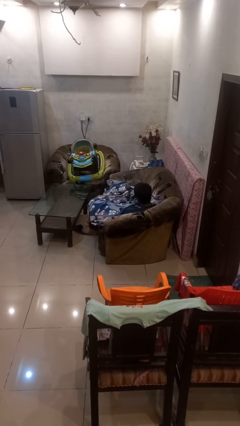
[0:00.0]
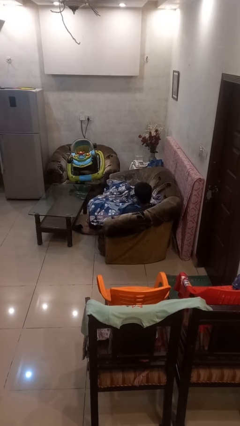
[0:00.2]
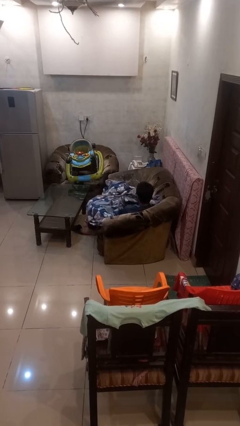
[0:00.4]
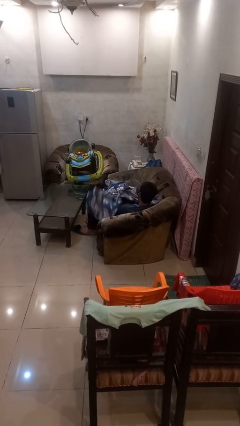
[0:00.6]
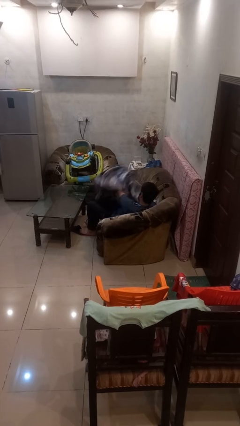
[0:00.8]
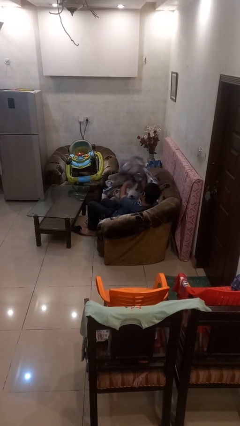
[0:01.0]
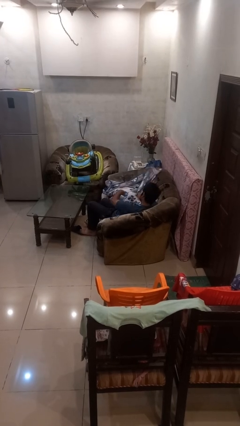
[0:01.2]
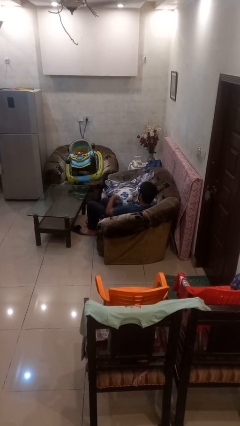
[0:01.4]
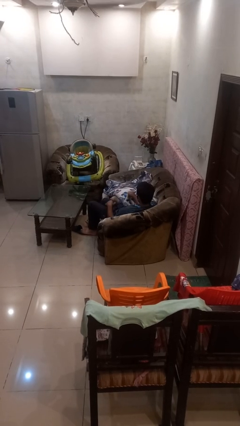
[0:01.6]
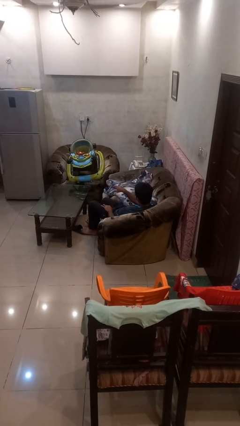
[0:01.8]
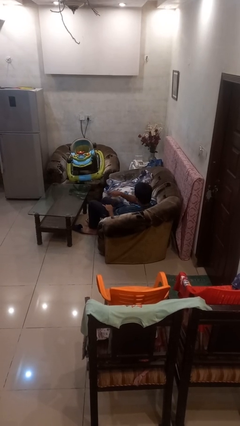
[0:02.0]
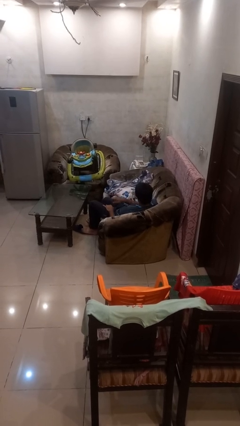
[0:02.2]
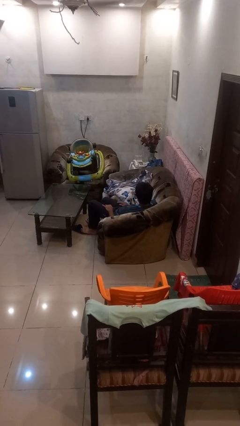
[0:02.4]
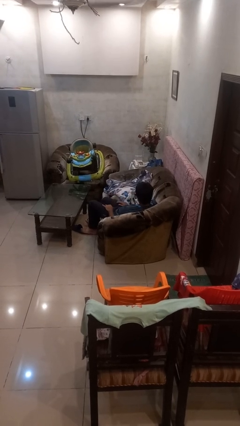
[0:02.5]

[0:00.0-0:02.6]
person uncovers with blanket

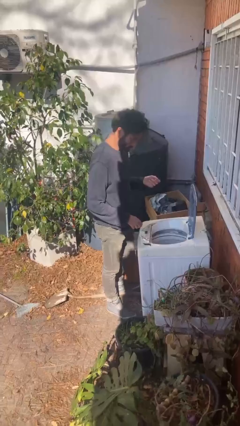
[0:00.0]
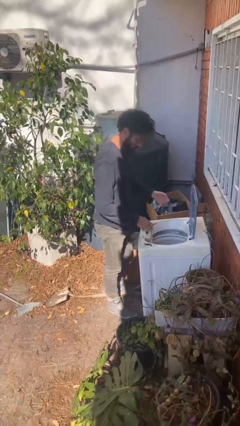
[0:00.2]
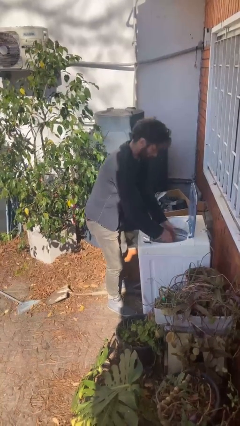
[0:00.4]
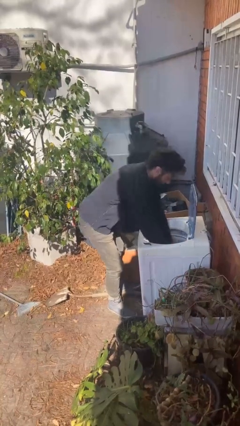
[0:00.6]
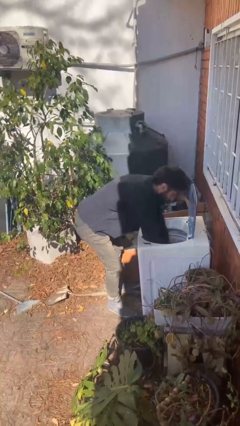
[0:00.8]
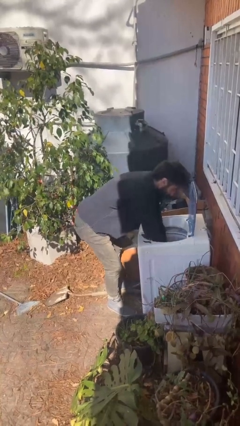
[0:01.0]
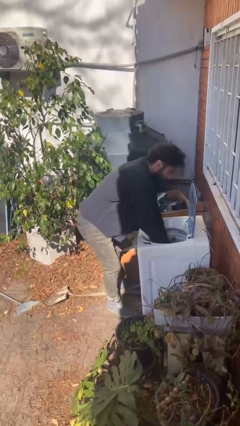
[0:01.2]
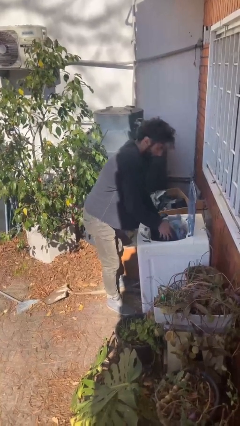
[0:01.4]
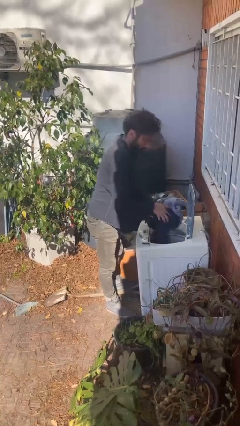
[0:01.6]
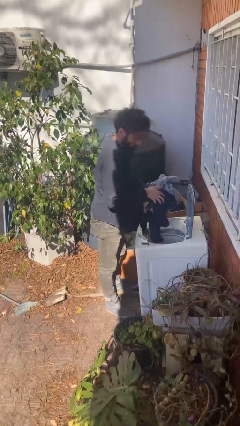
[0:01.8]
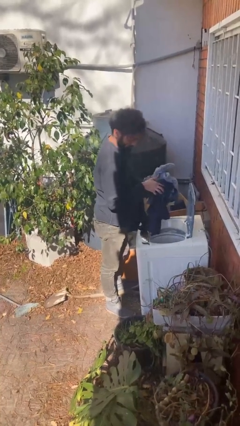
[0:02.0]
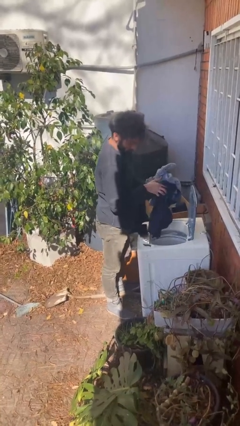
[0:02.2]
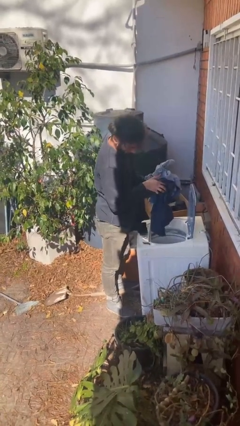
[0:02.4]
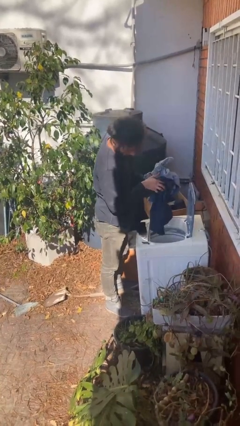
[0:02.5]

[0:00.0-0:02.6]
person loads clotheswasher

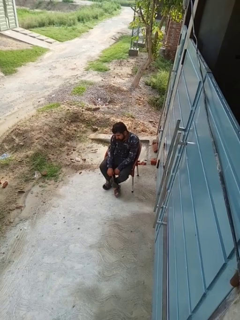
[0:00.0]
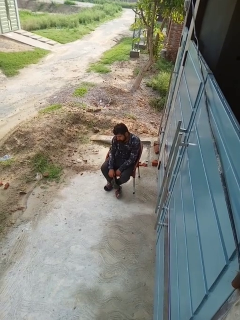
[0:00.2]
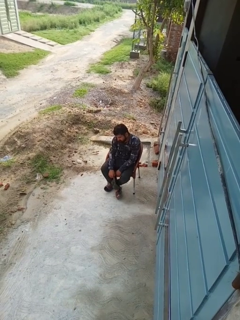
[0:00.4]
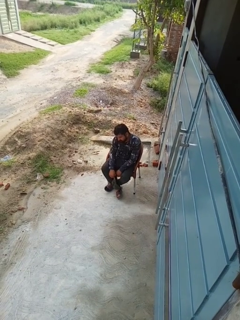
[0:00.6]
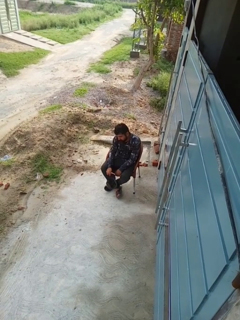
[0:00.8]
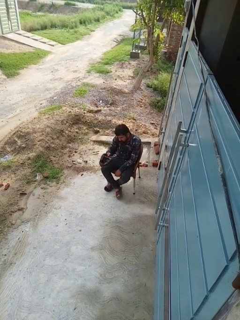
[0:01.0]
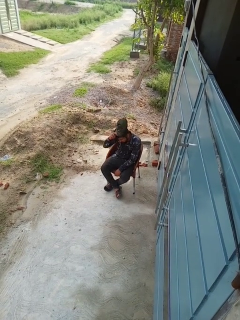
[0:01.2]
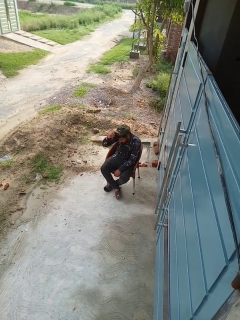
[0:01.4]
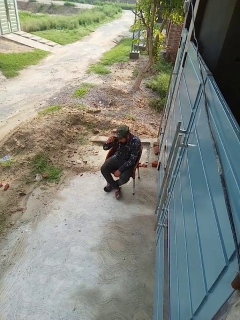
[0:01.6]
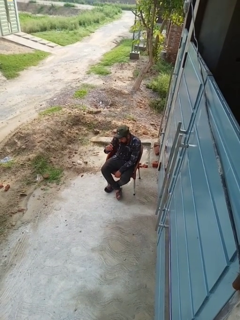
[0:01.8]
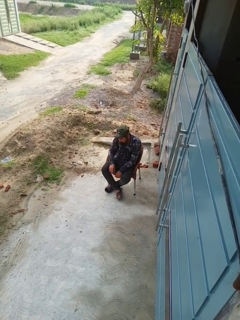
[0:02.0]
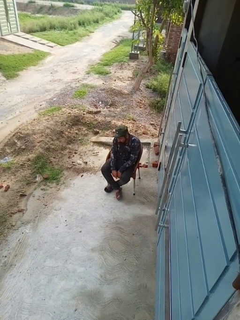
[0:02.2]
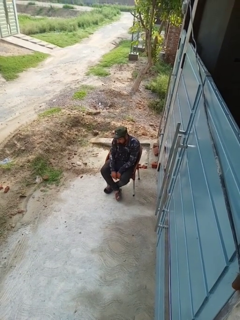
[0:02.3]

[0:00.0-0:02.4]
person puts on hat

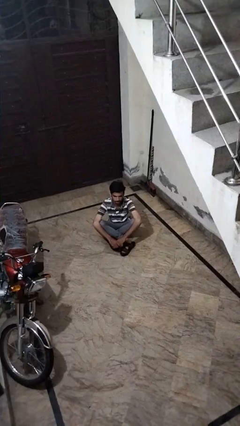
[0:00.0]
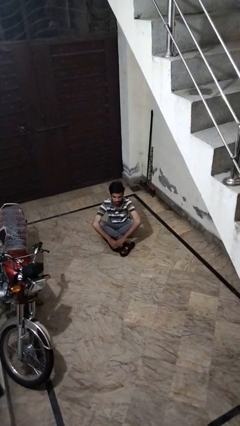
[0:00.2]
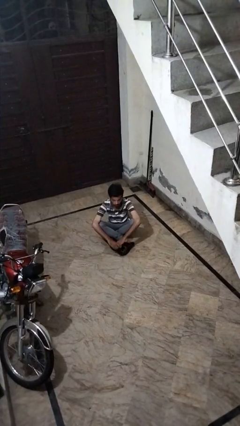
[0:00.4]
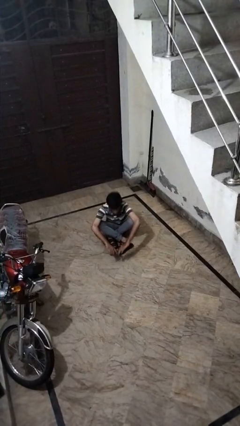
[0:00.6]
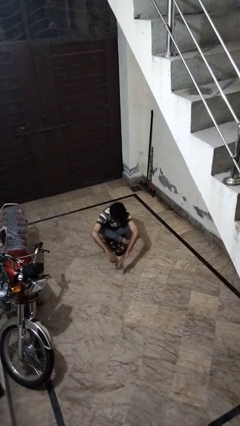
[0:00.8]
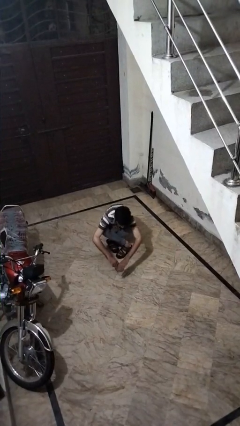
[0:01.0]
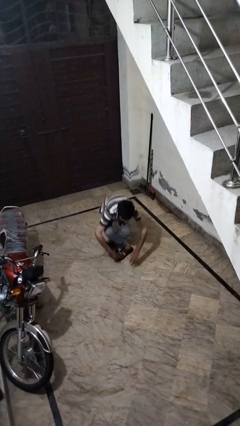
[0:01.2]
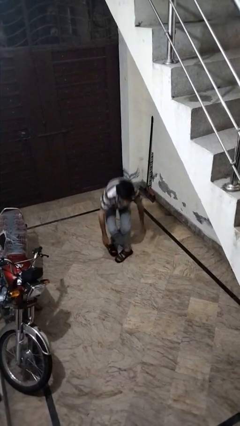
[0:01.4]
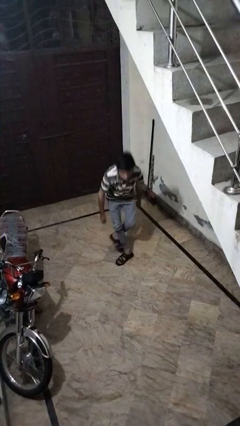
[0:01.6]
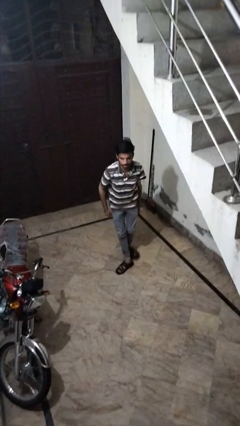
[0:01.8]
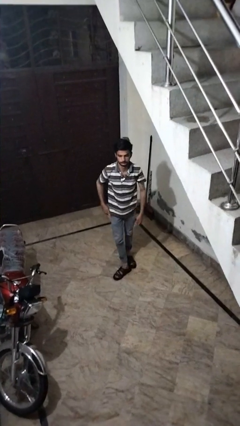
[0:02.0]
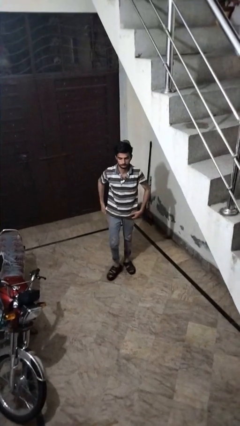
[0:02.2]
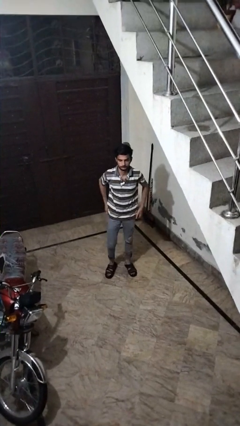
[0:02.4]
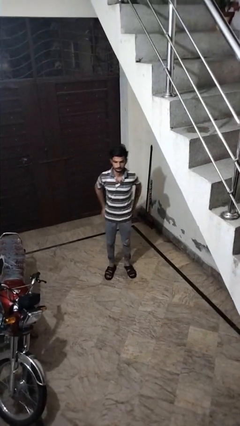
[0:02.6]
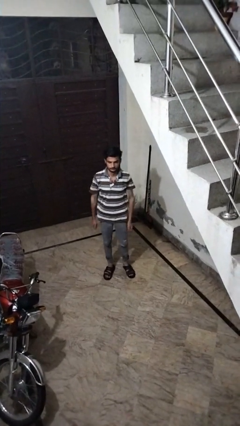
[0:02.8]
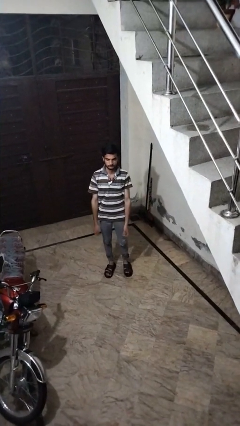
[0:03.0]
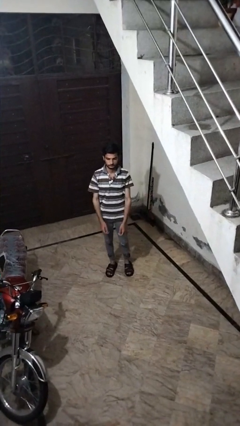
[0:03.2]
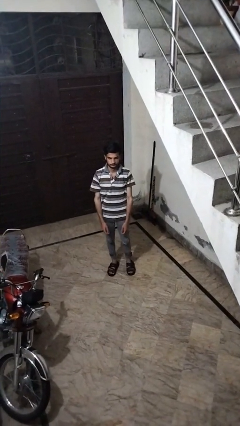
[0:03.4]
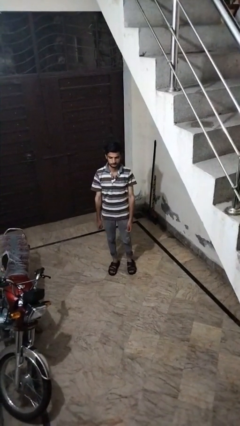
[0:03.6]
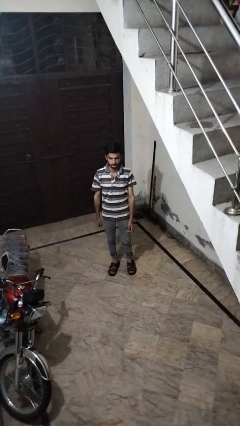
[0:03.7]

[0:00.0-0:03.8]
person stands up from floor

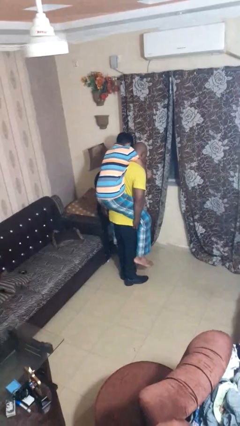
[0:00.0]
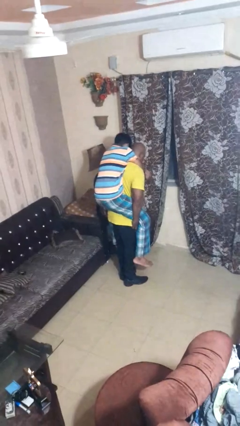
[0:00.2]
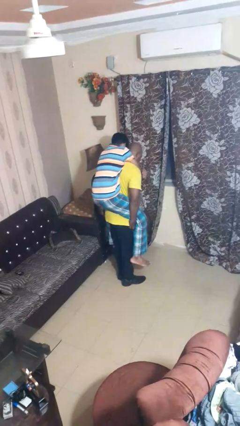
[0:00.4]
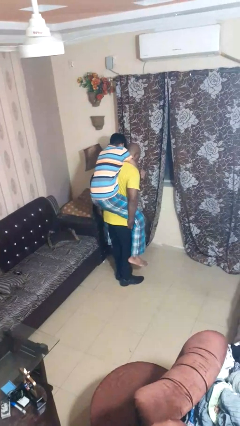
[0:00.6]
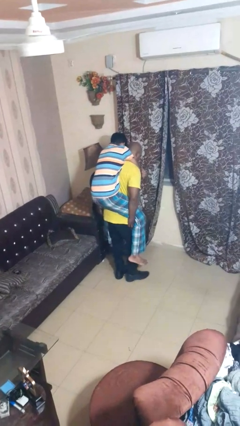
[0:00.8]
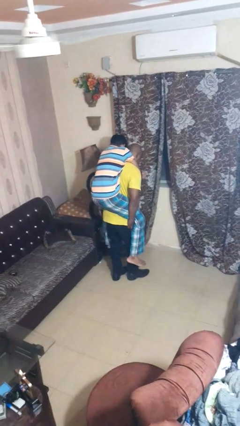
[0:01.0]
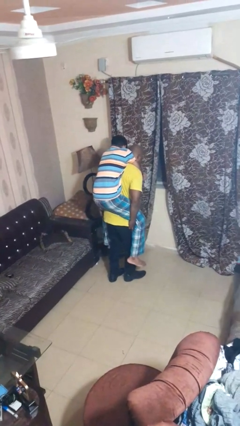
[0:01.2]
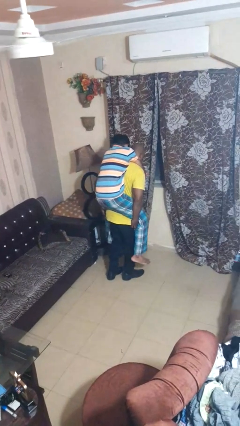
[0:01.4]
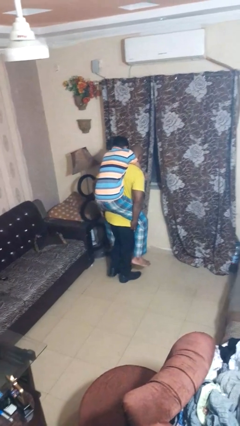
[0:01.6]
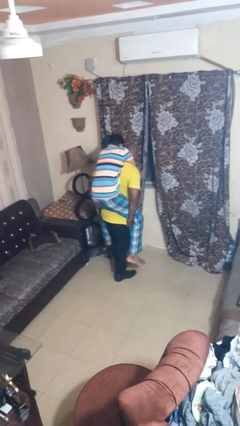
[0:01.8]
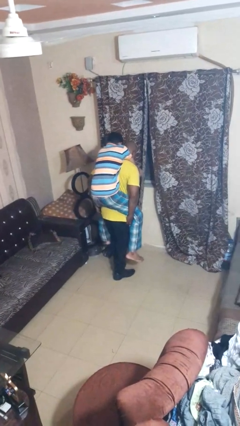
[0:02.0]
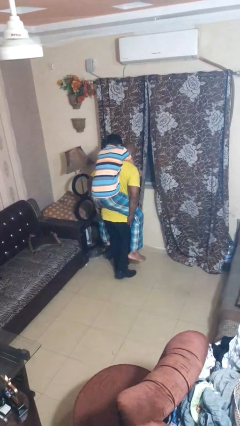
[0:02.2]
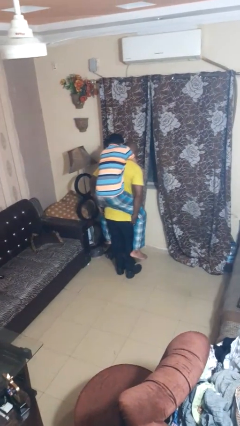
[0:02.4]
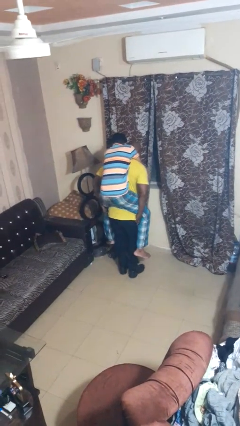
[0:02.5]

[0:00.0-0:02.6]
person carries person on back

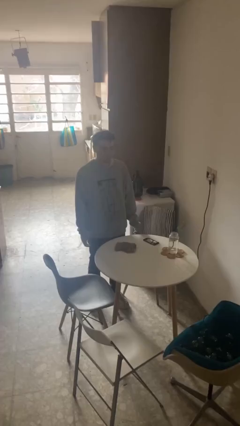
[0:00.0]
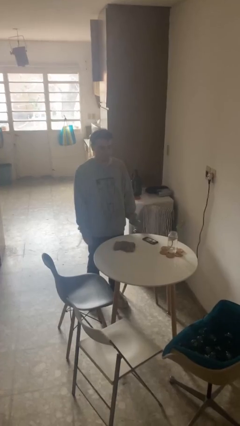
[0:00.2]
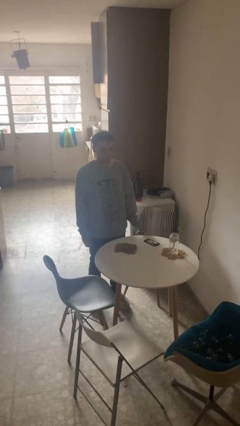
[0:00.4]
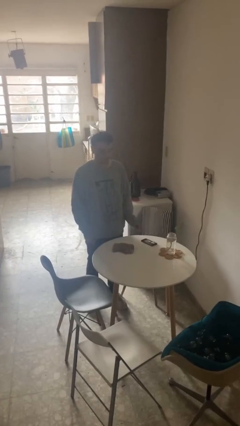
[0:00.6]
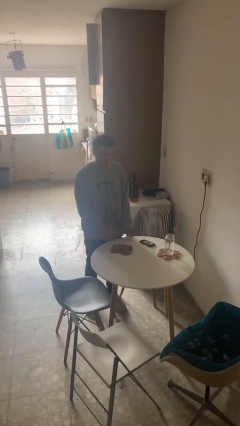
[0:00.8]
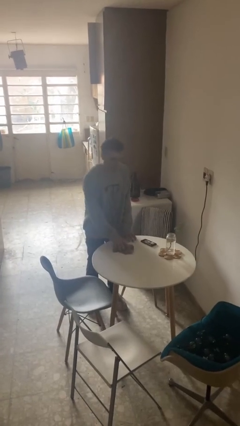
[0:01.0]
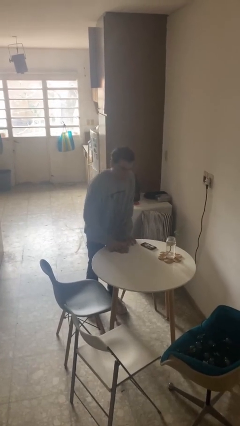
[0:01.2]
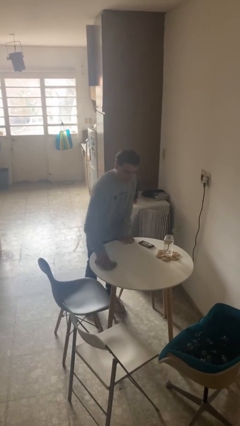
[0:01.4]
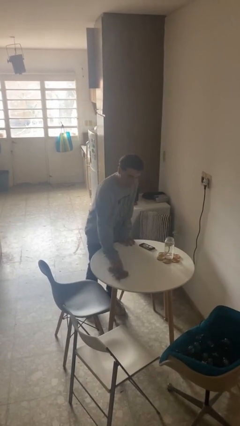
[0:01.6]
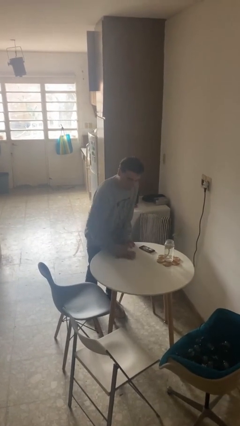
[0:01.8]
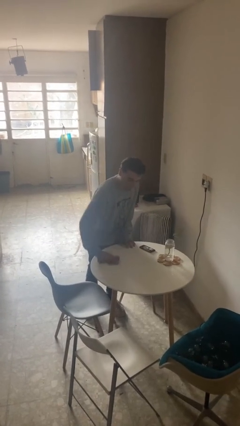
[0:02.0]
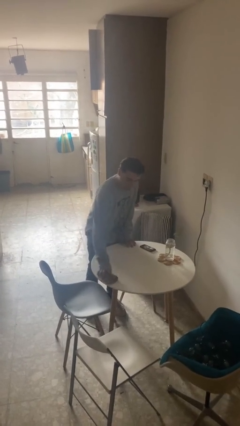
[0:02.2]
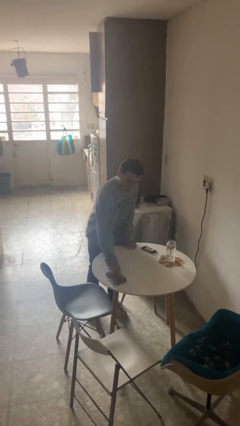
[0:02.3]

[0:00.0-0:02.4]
person cleans table with rag

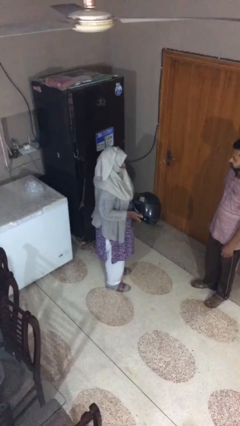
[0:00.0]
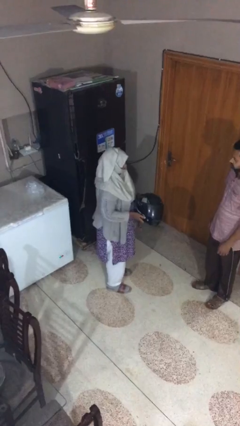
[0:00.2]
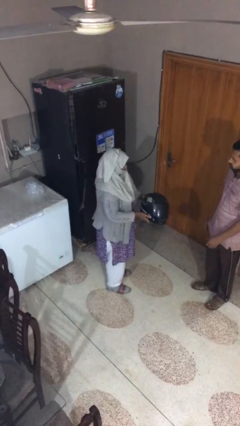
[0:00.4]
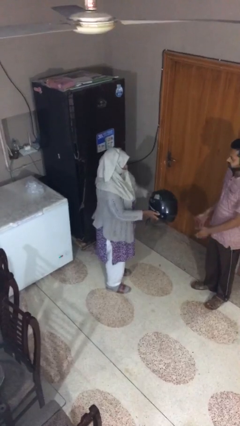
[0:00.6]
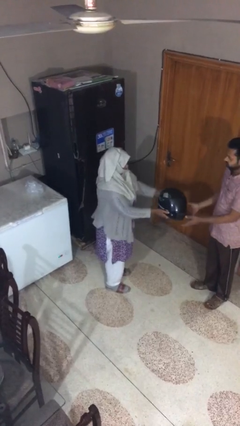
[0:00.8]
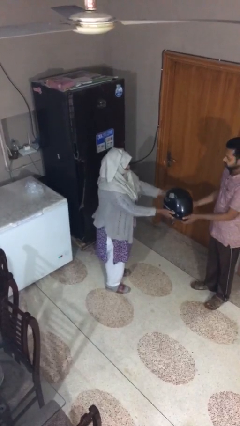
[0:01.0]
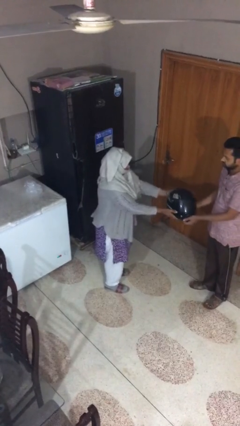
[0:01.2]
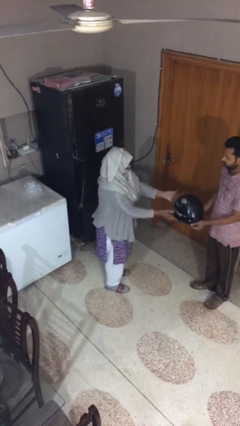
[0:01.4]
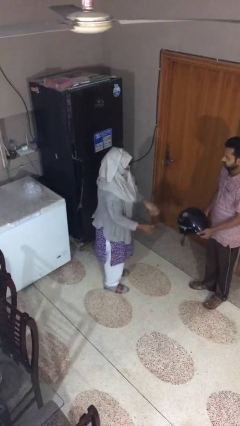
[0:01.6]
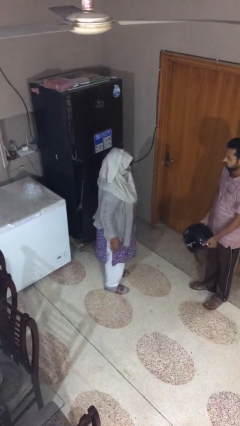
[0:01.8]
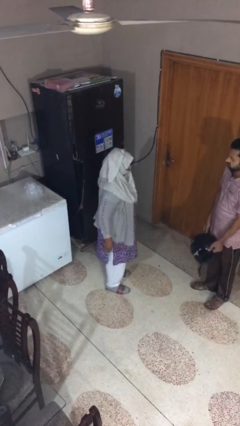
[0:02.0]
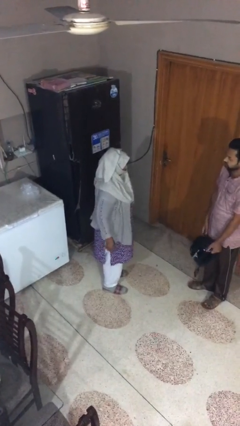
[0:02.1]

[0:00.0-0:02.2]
person transfers object to person
